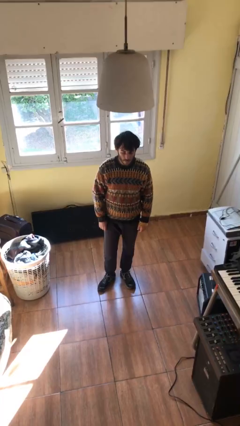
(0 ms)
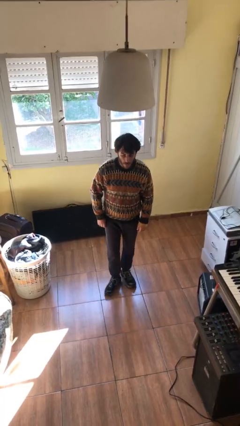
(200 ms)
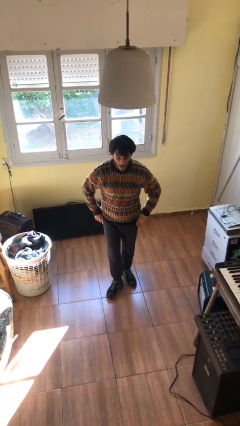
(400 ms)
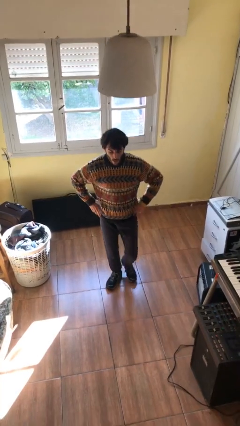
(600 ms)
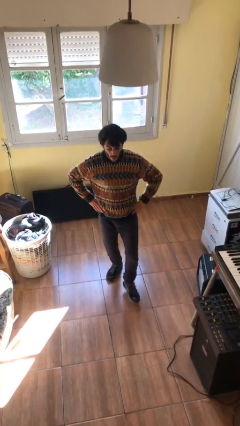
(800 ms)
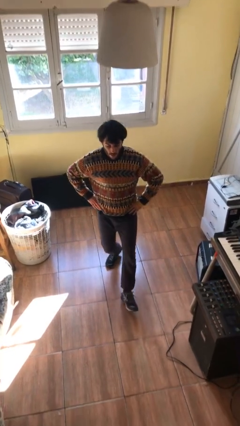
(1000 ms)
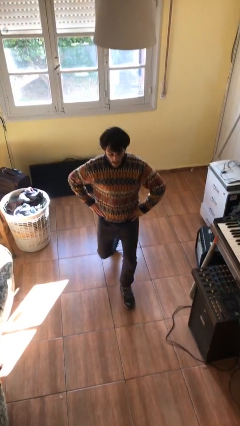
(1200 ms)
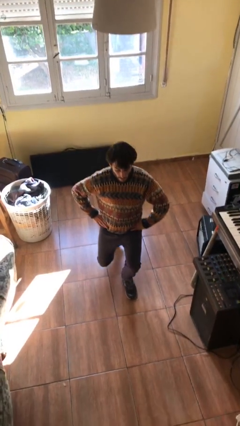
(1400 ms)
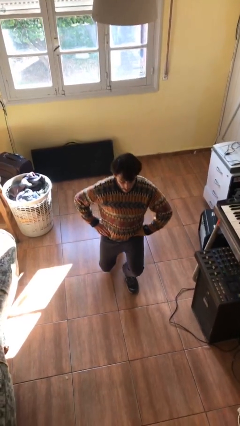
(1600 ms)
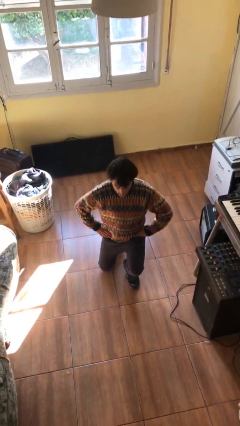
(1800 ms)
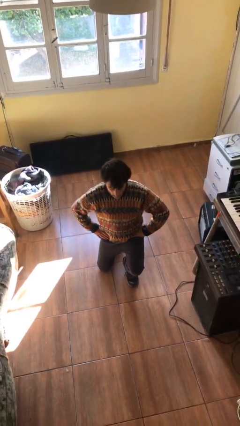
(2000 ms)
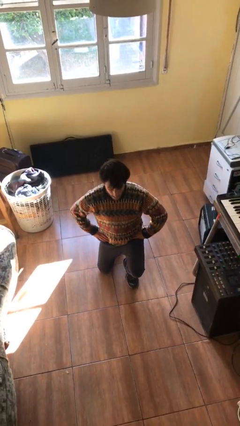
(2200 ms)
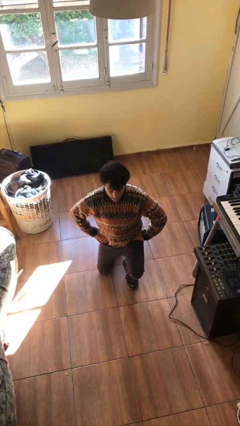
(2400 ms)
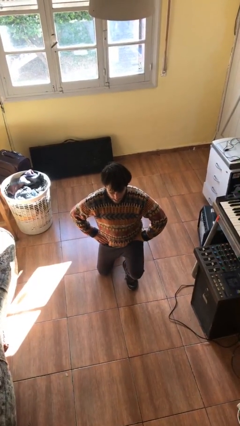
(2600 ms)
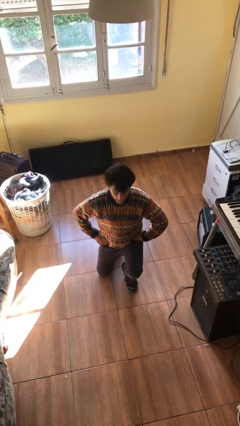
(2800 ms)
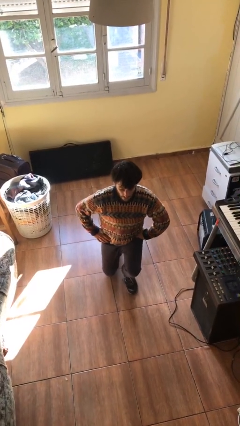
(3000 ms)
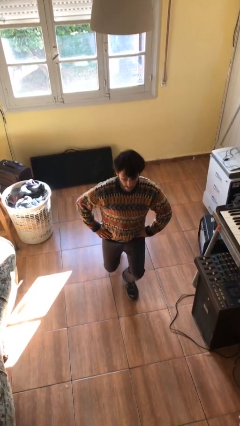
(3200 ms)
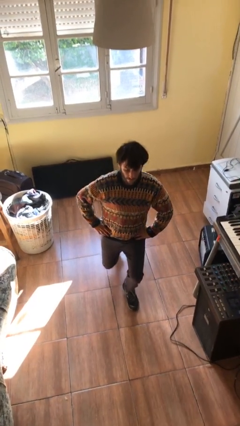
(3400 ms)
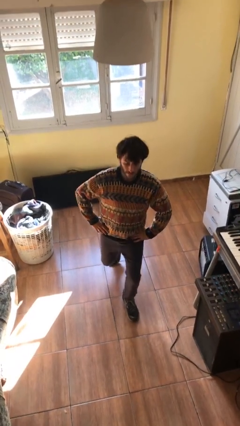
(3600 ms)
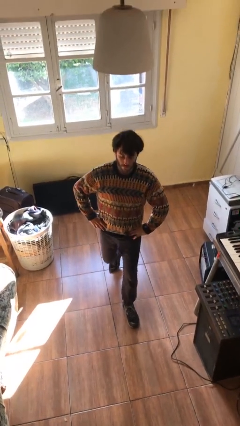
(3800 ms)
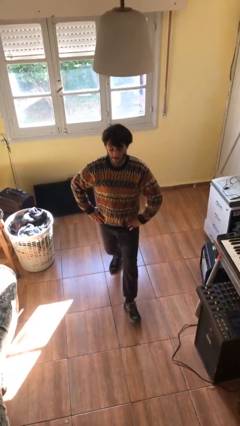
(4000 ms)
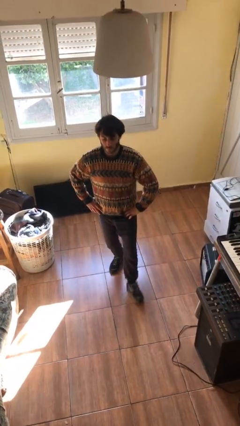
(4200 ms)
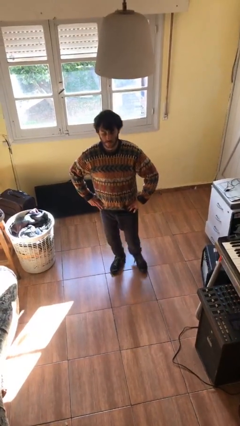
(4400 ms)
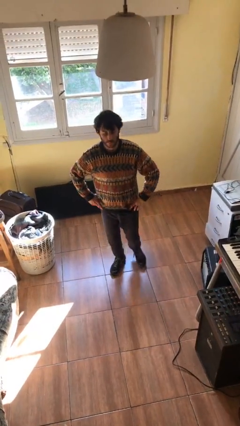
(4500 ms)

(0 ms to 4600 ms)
person exercises with lunges

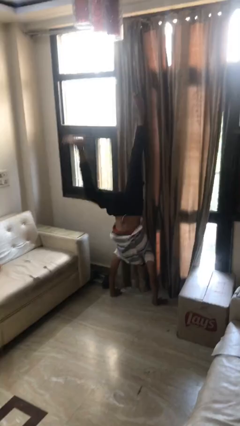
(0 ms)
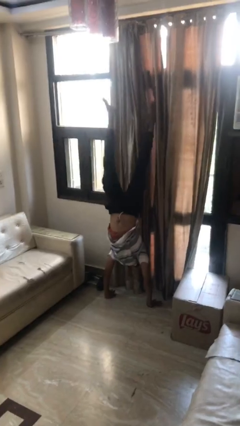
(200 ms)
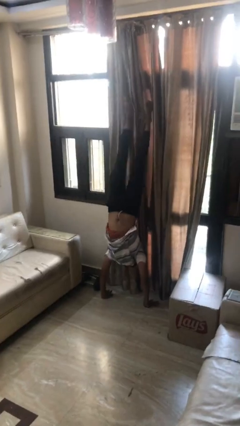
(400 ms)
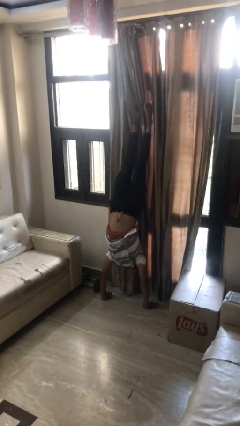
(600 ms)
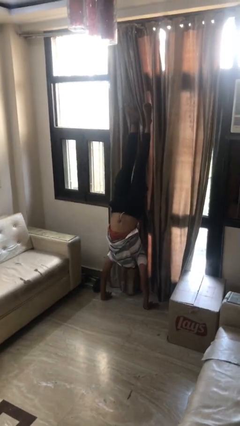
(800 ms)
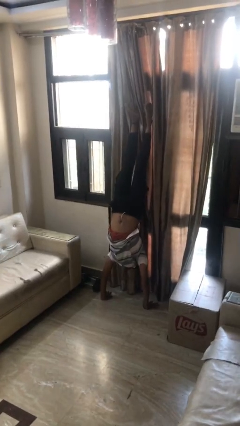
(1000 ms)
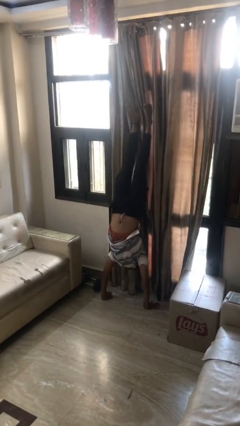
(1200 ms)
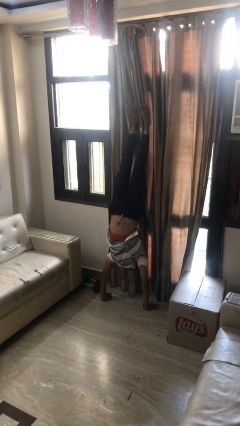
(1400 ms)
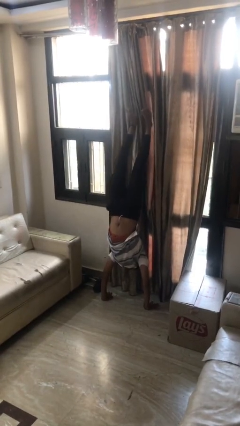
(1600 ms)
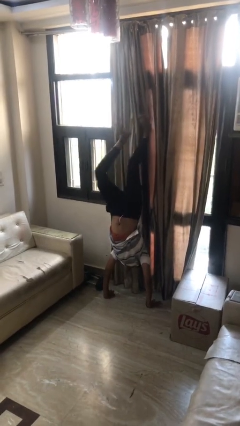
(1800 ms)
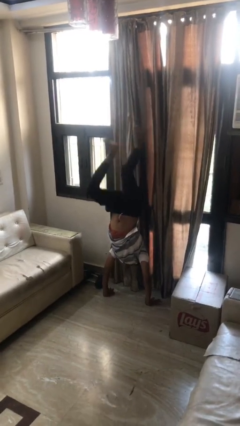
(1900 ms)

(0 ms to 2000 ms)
person handstand

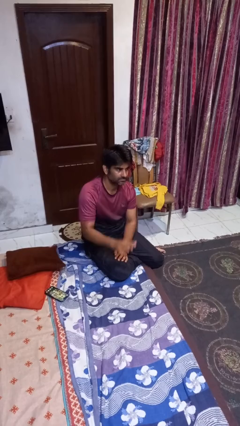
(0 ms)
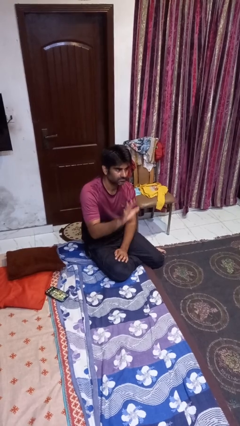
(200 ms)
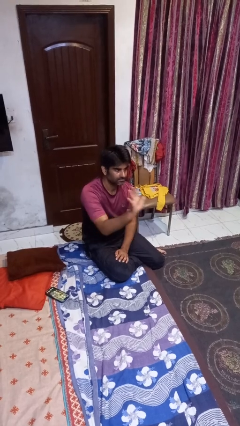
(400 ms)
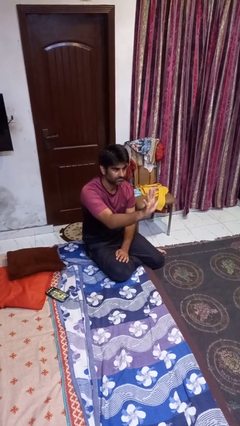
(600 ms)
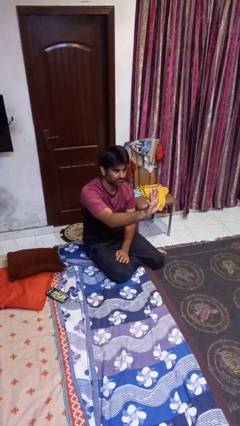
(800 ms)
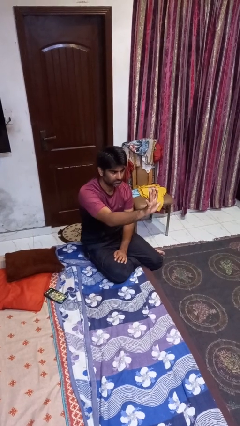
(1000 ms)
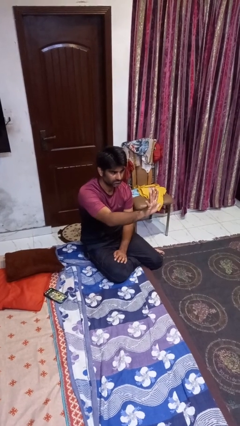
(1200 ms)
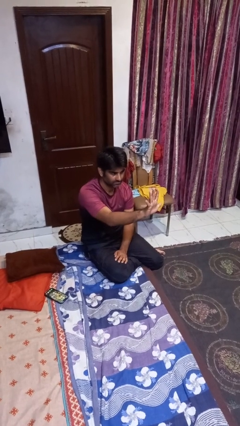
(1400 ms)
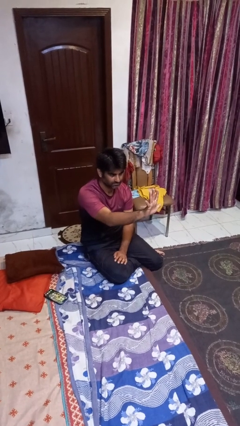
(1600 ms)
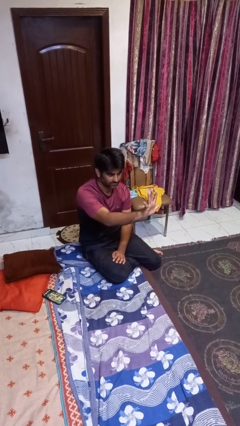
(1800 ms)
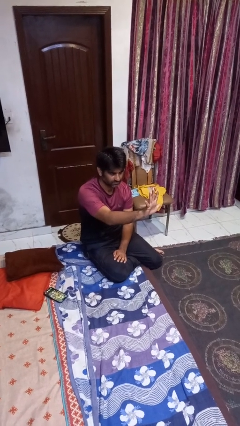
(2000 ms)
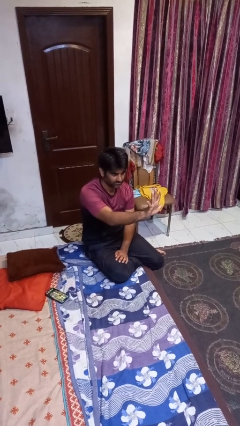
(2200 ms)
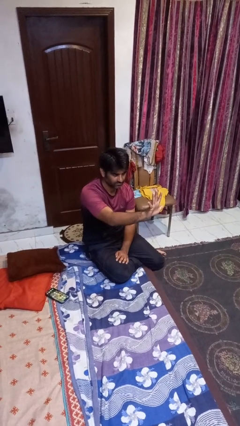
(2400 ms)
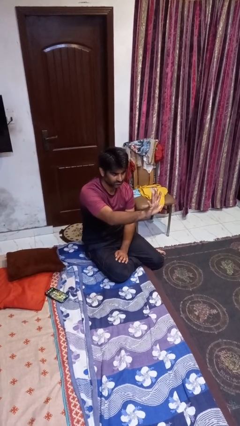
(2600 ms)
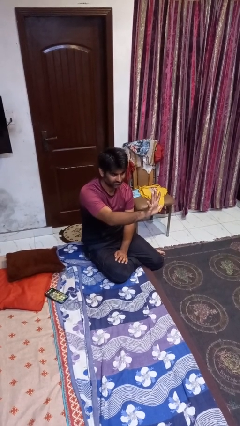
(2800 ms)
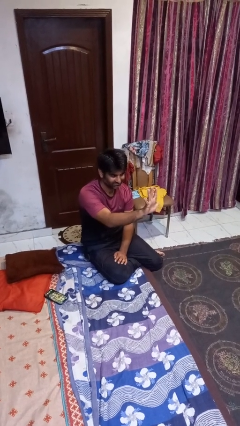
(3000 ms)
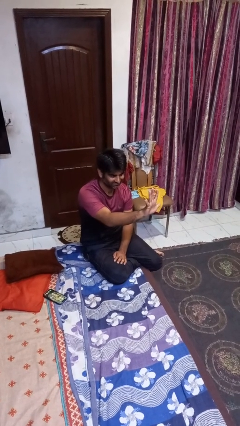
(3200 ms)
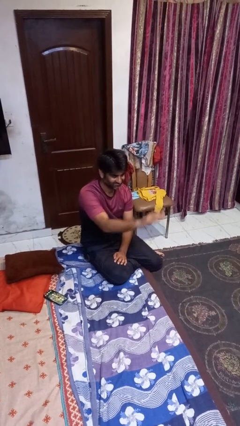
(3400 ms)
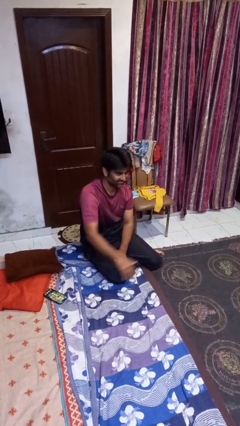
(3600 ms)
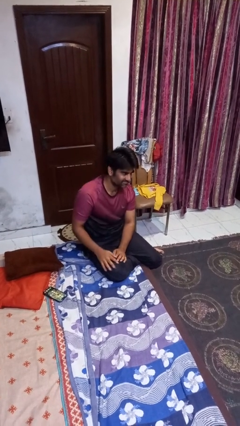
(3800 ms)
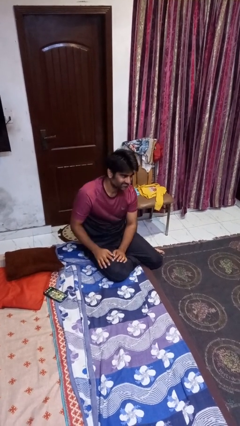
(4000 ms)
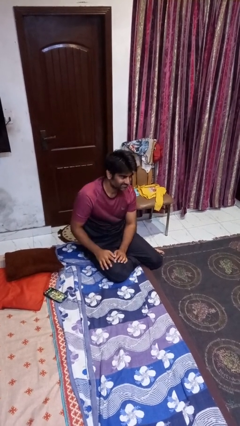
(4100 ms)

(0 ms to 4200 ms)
person gestures number five

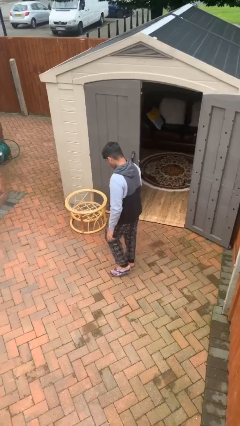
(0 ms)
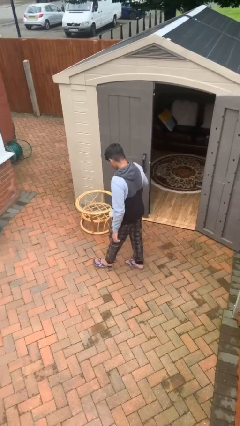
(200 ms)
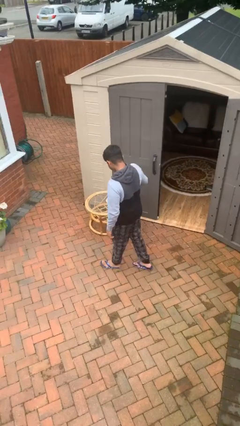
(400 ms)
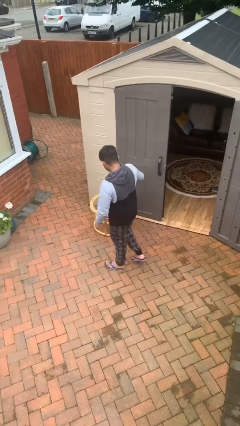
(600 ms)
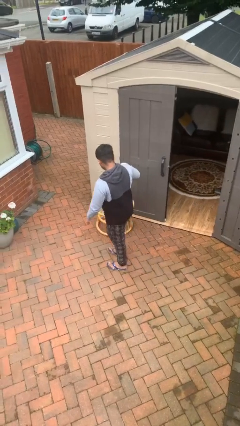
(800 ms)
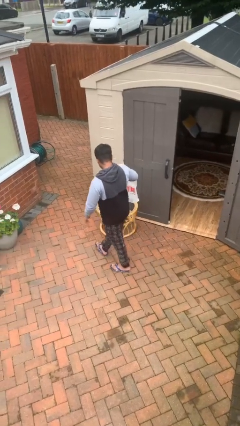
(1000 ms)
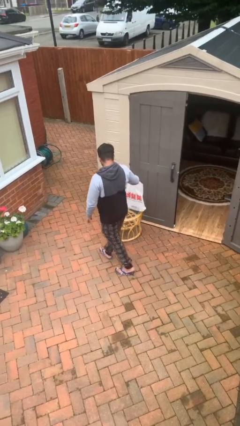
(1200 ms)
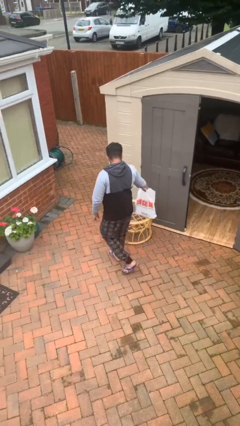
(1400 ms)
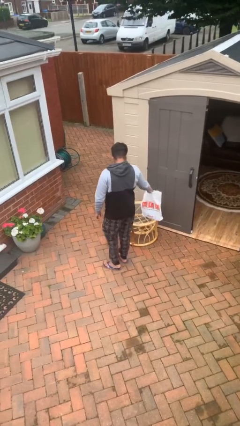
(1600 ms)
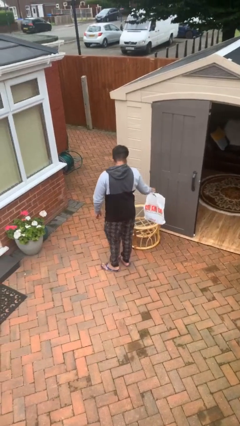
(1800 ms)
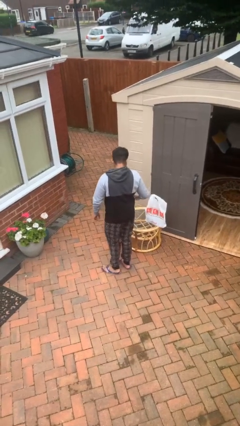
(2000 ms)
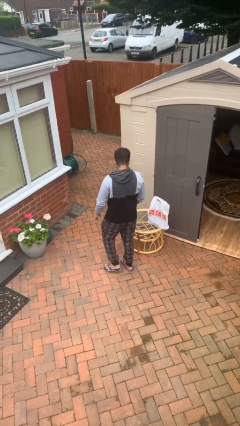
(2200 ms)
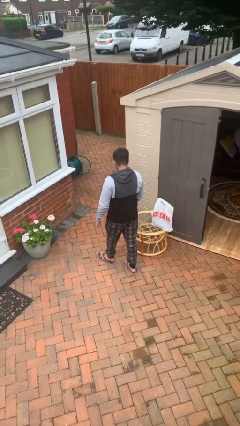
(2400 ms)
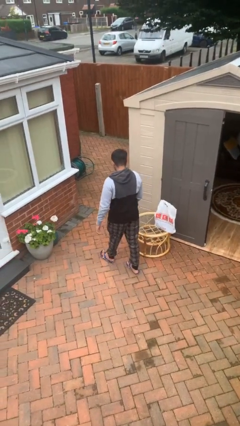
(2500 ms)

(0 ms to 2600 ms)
person puts down object on table

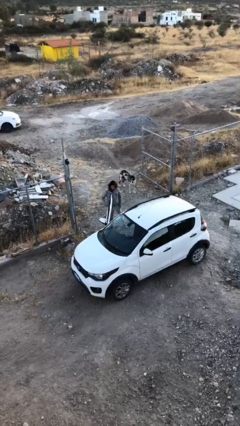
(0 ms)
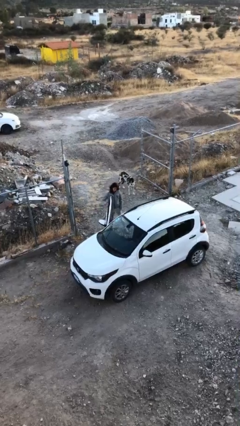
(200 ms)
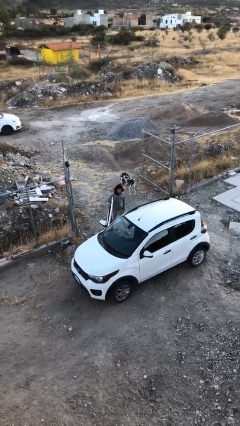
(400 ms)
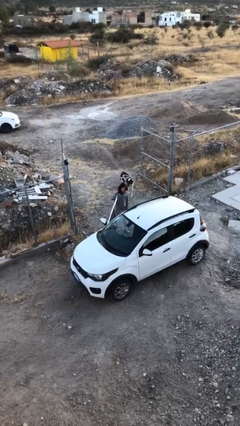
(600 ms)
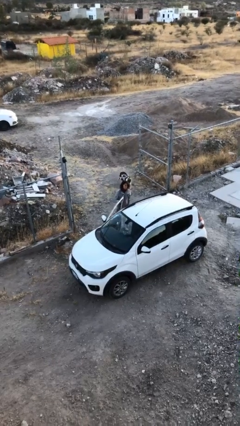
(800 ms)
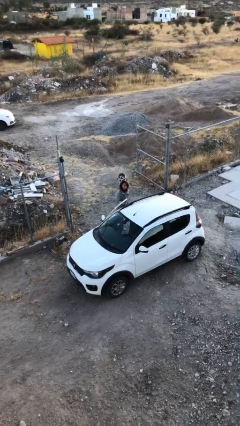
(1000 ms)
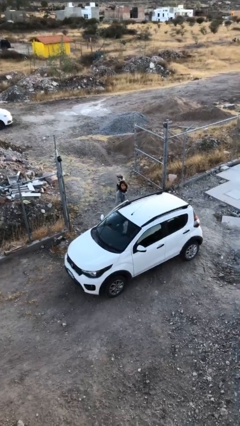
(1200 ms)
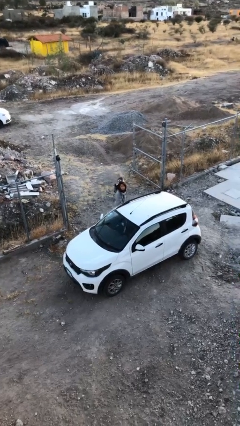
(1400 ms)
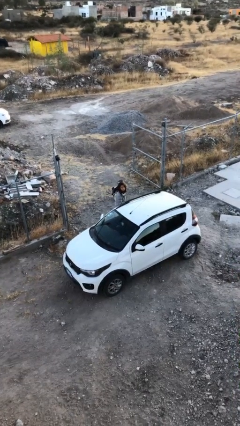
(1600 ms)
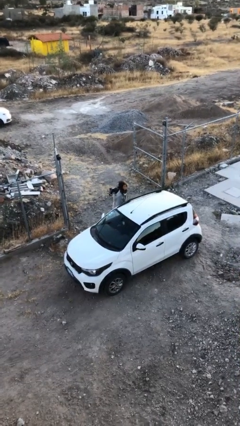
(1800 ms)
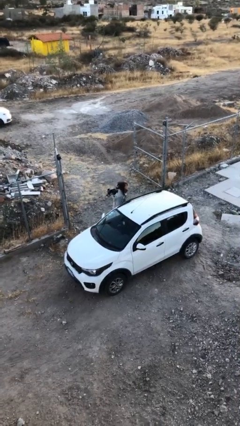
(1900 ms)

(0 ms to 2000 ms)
person closes car door

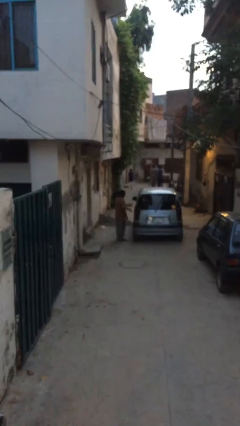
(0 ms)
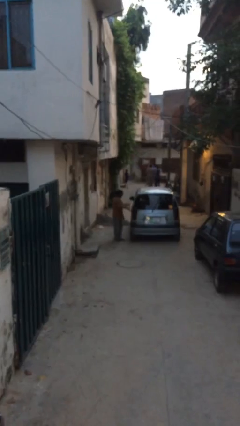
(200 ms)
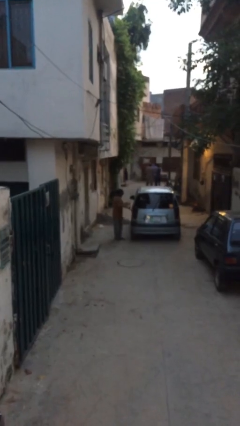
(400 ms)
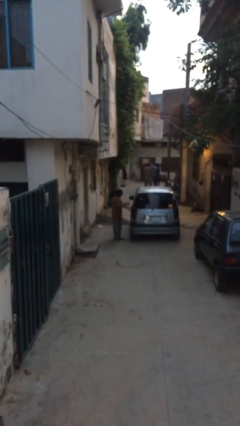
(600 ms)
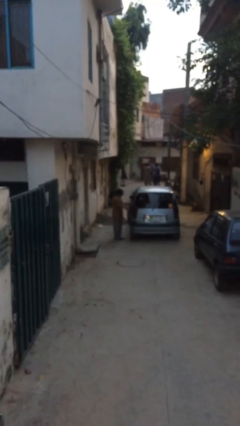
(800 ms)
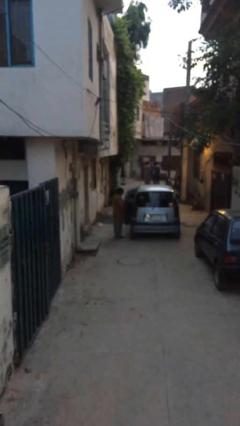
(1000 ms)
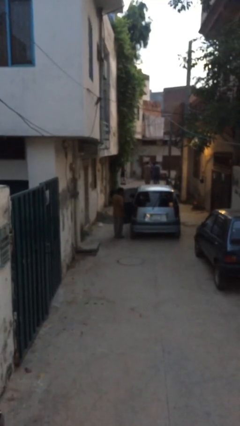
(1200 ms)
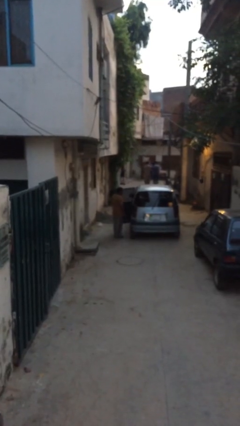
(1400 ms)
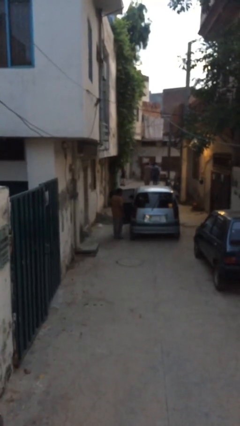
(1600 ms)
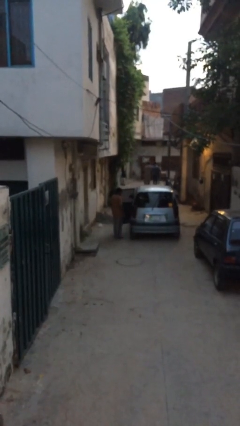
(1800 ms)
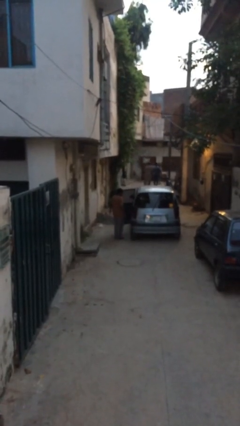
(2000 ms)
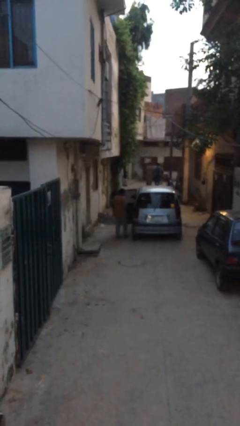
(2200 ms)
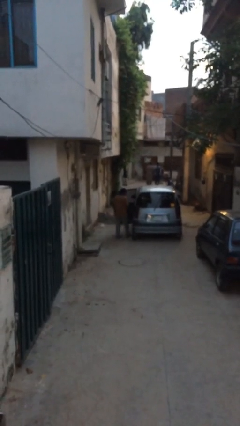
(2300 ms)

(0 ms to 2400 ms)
person opens car door
